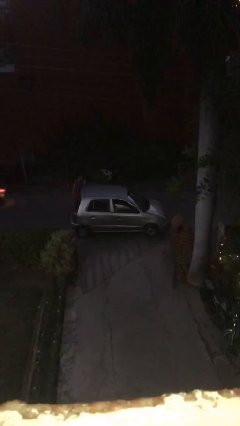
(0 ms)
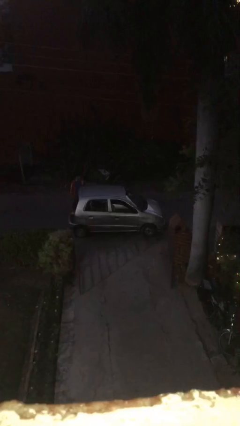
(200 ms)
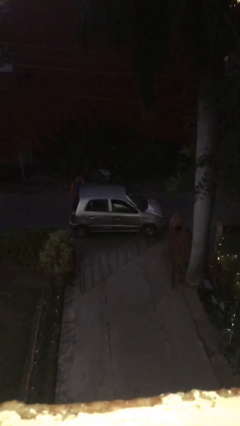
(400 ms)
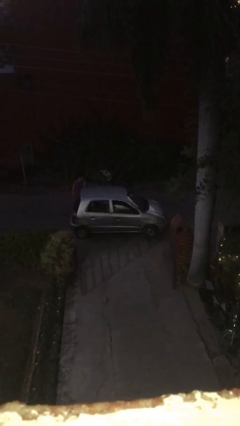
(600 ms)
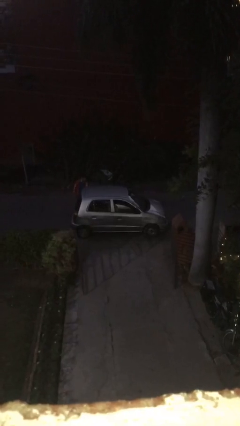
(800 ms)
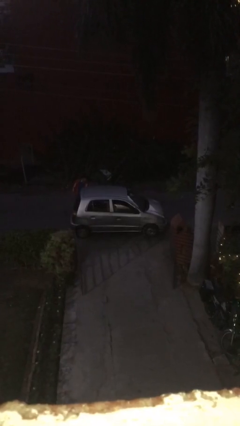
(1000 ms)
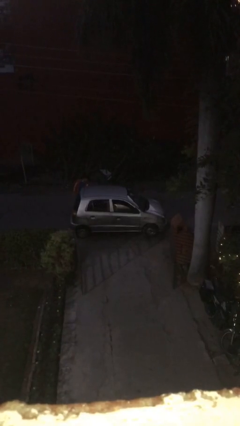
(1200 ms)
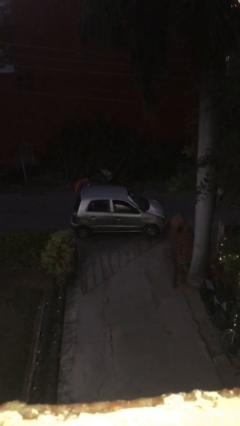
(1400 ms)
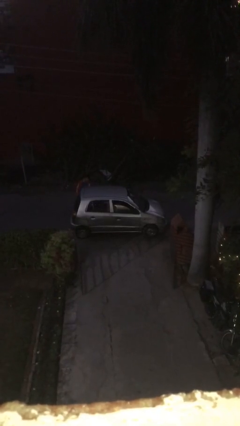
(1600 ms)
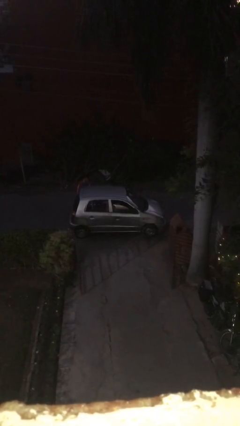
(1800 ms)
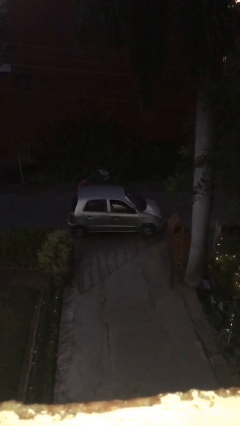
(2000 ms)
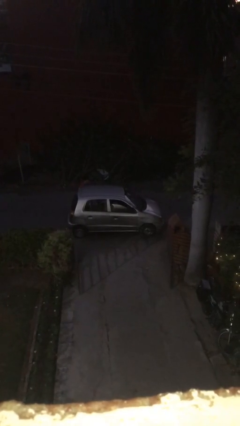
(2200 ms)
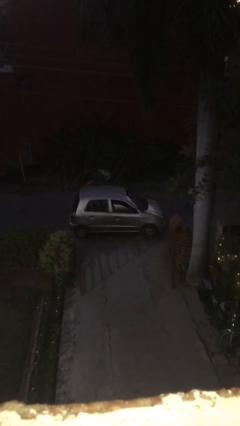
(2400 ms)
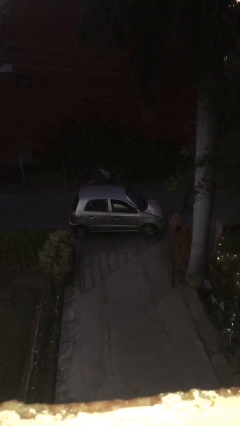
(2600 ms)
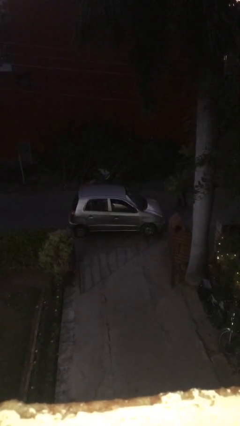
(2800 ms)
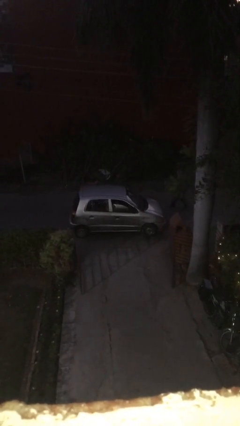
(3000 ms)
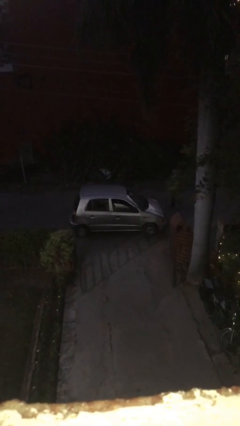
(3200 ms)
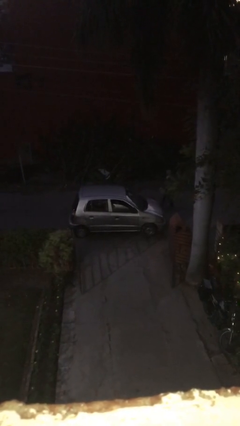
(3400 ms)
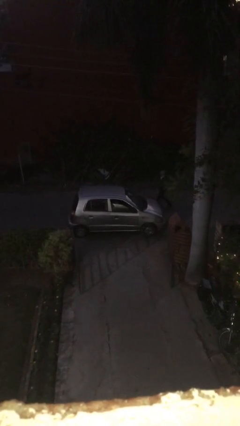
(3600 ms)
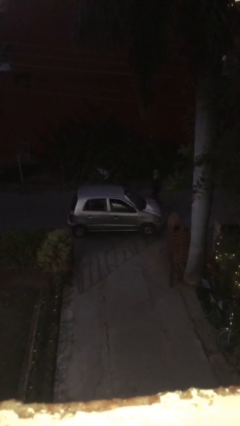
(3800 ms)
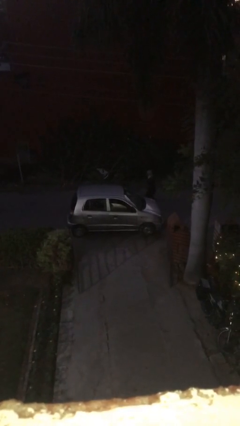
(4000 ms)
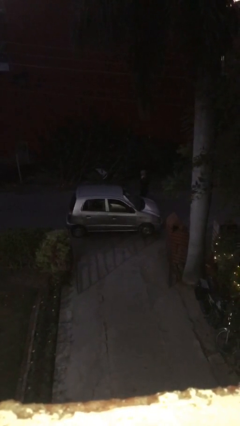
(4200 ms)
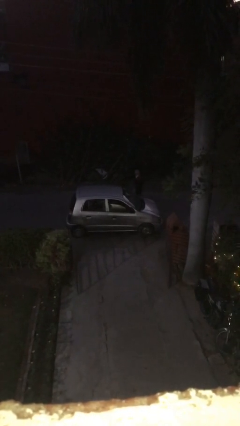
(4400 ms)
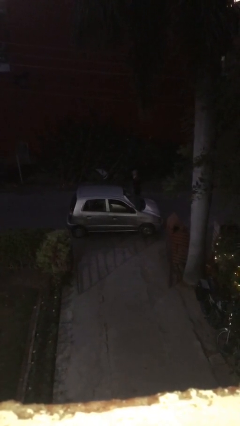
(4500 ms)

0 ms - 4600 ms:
car picks up person

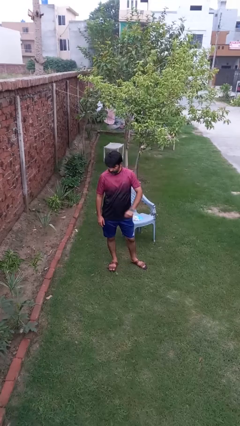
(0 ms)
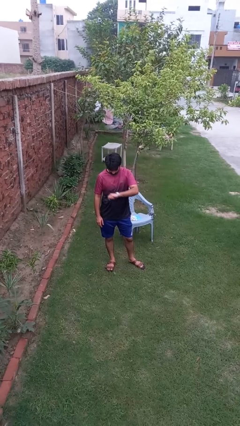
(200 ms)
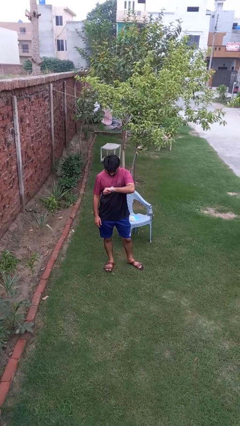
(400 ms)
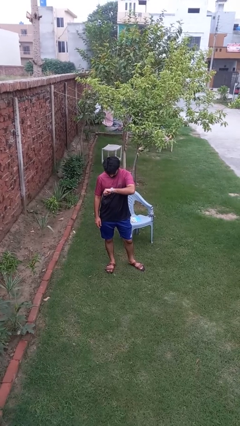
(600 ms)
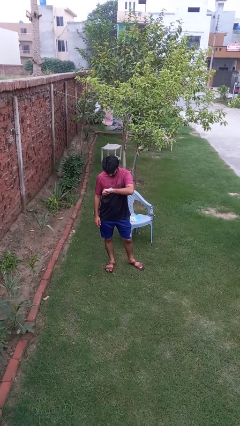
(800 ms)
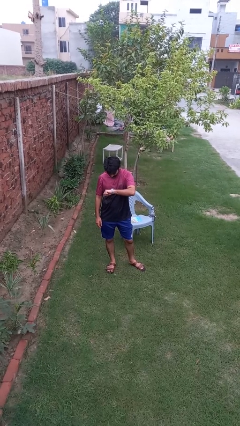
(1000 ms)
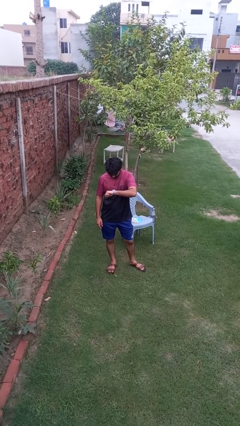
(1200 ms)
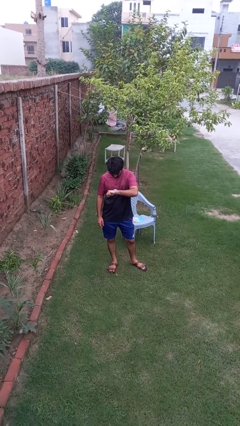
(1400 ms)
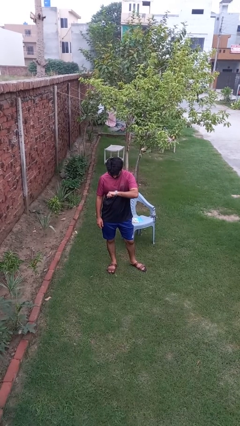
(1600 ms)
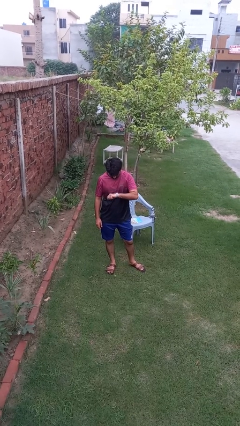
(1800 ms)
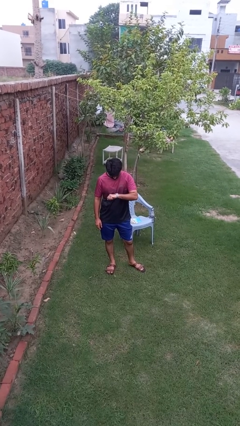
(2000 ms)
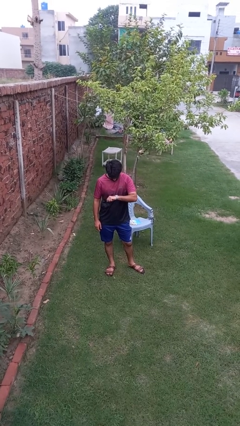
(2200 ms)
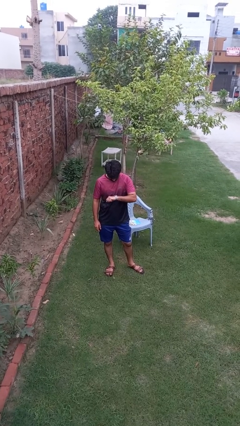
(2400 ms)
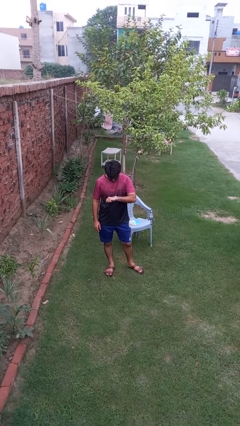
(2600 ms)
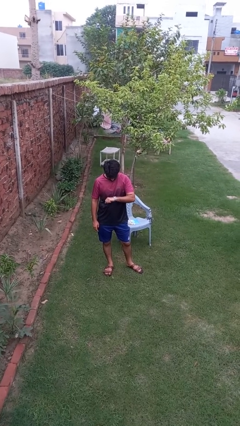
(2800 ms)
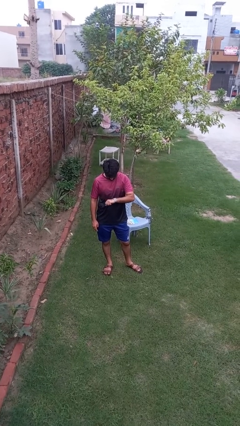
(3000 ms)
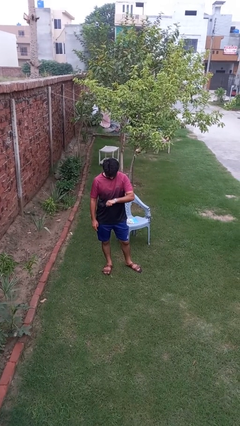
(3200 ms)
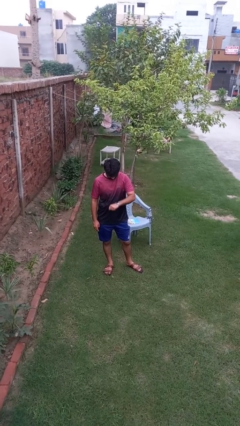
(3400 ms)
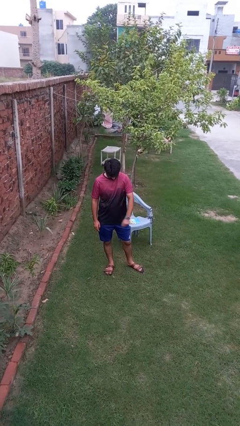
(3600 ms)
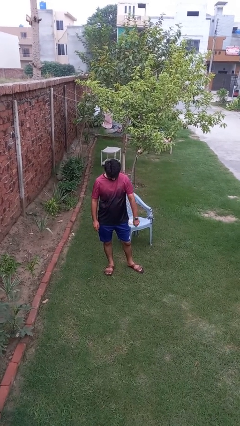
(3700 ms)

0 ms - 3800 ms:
person looks at wristwatch

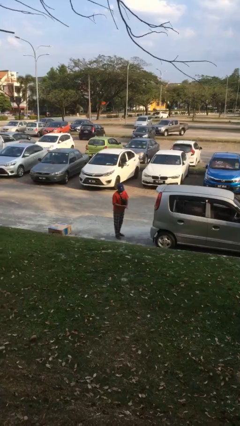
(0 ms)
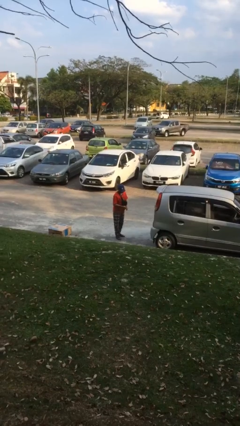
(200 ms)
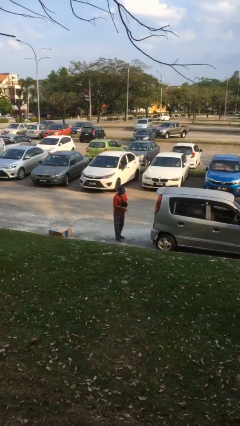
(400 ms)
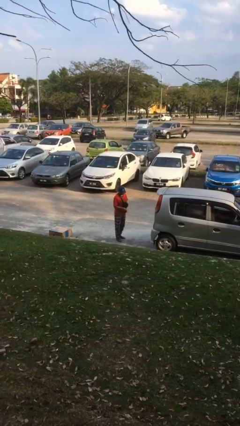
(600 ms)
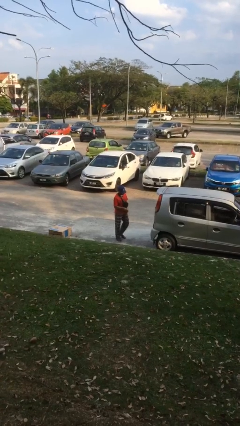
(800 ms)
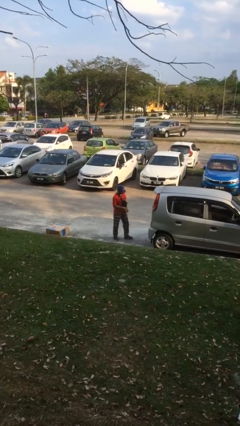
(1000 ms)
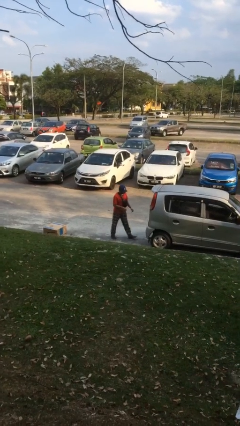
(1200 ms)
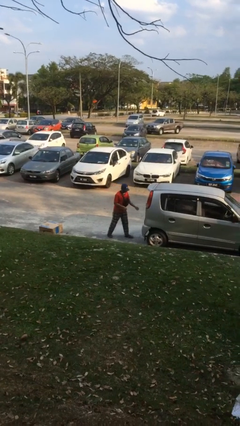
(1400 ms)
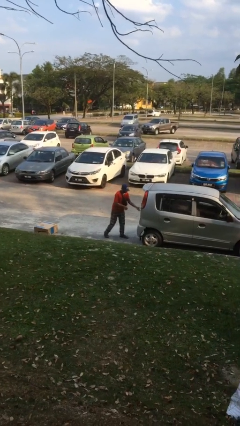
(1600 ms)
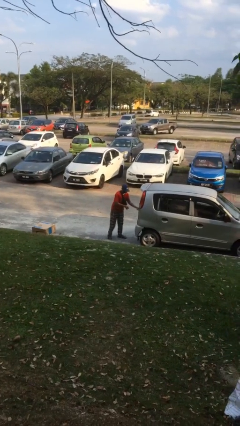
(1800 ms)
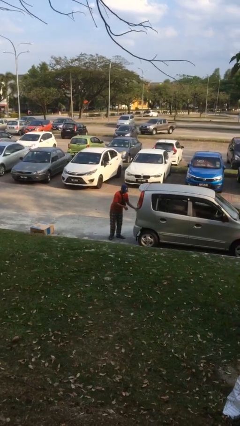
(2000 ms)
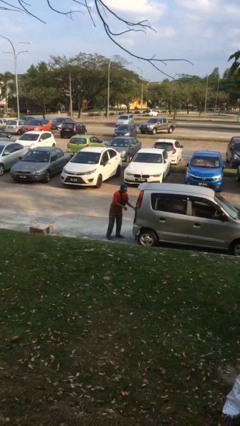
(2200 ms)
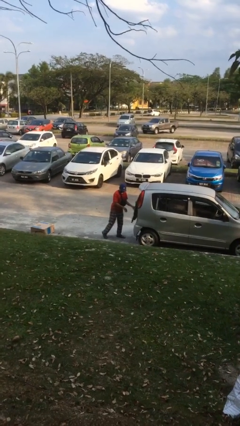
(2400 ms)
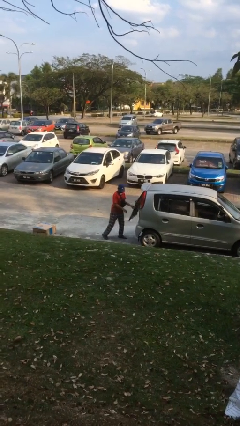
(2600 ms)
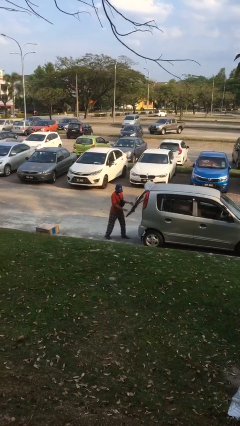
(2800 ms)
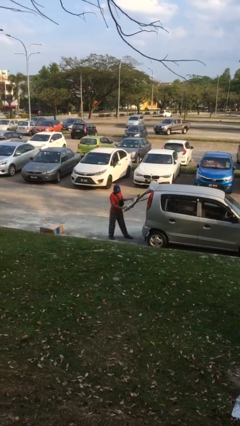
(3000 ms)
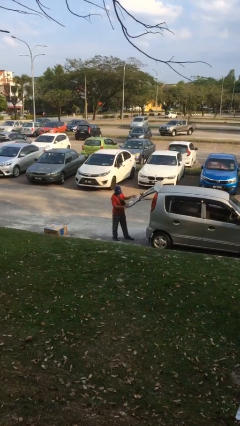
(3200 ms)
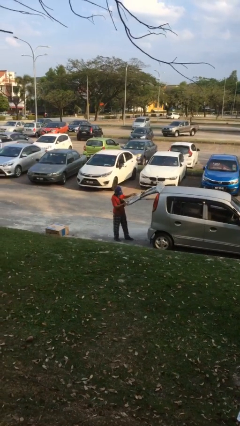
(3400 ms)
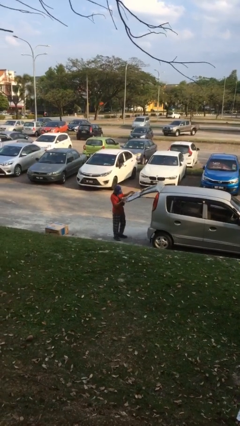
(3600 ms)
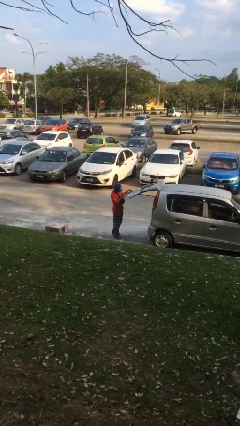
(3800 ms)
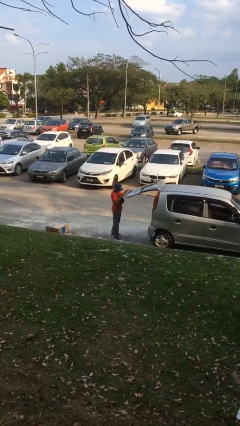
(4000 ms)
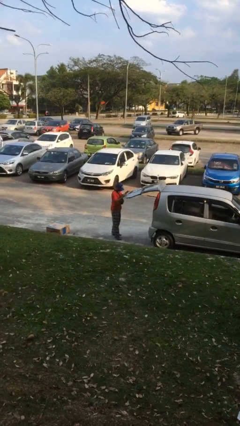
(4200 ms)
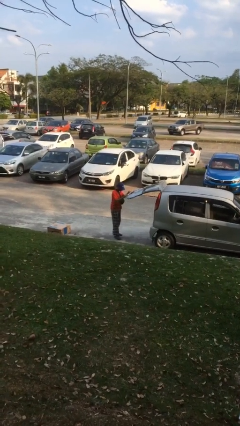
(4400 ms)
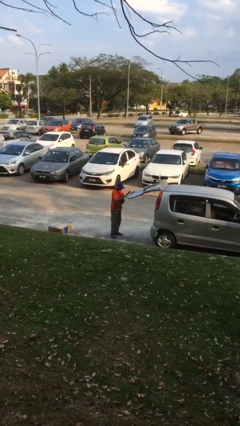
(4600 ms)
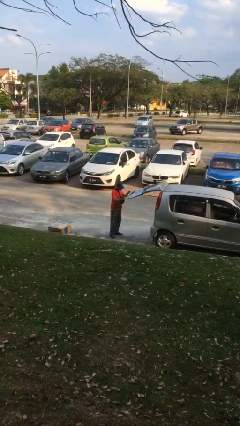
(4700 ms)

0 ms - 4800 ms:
person opens car trunk

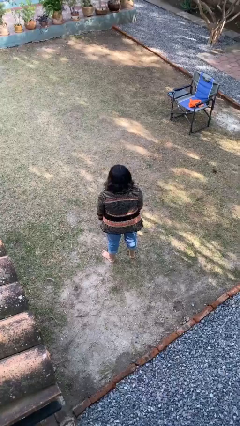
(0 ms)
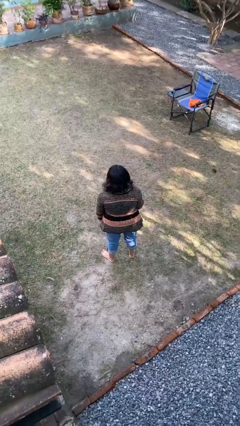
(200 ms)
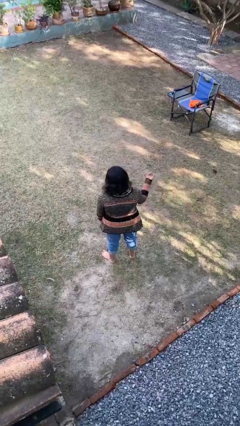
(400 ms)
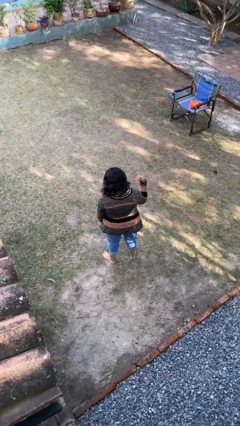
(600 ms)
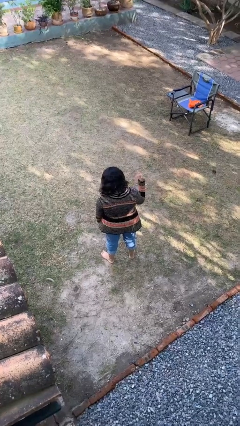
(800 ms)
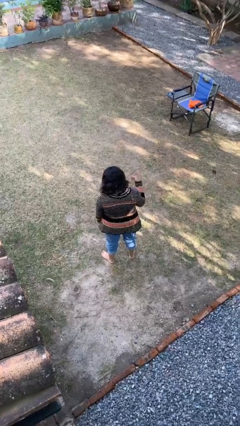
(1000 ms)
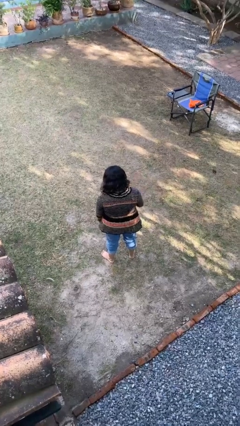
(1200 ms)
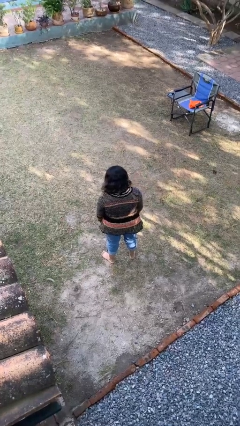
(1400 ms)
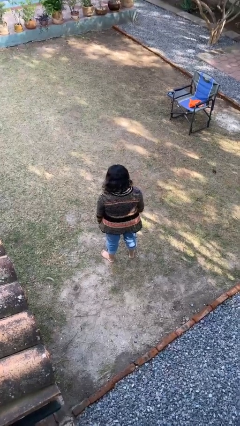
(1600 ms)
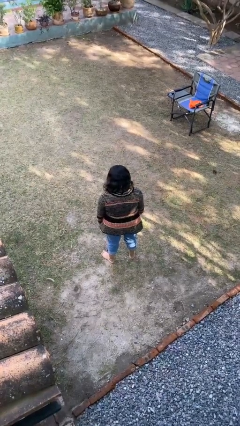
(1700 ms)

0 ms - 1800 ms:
person gestures hang loose

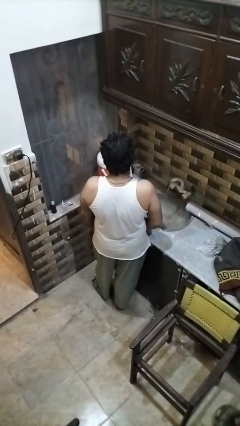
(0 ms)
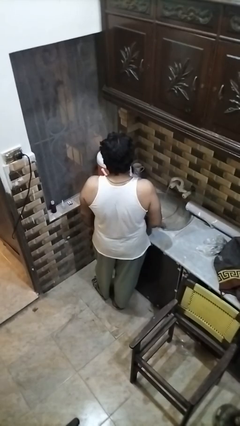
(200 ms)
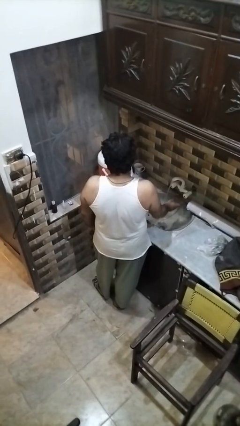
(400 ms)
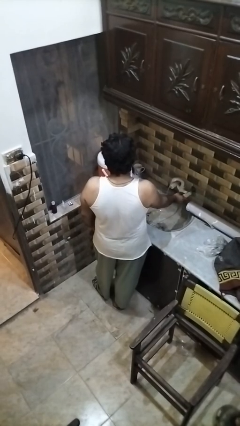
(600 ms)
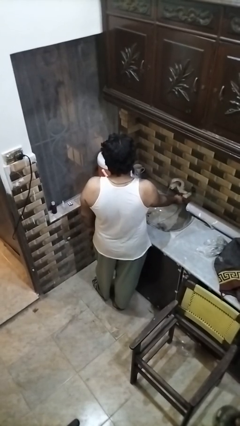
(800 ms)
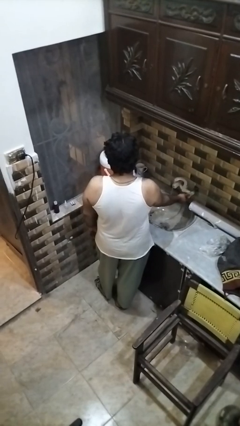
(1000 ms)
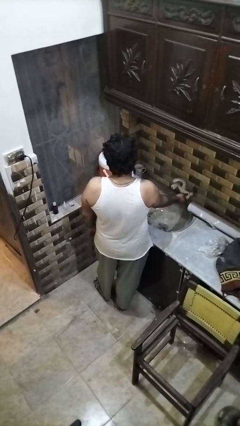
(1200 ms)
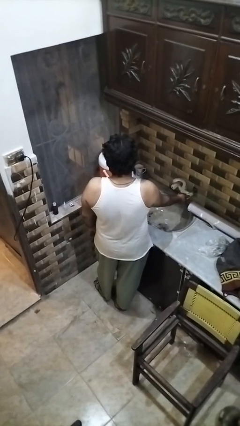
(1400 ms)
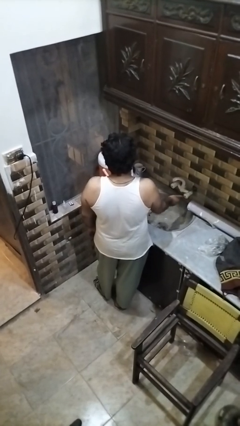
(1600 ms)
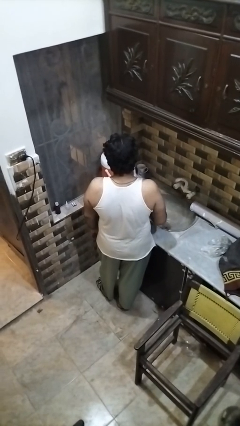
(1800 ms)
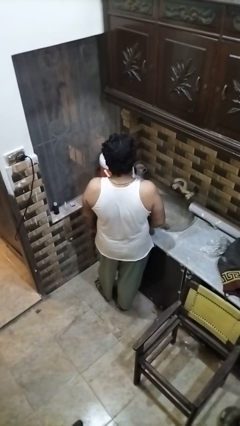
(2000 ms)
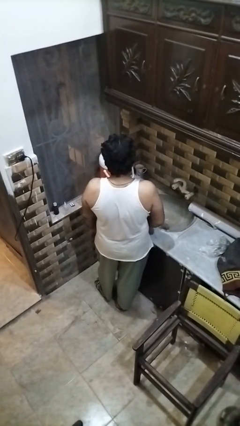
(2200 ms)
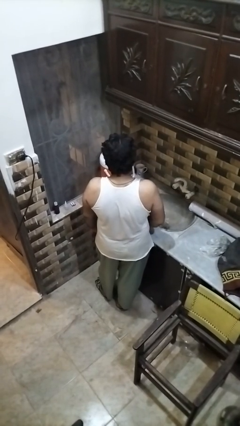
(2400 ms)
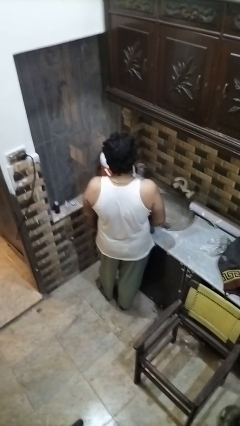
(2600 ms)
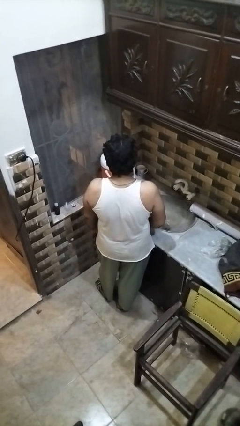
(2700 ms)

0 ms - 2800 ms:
person turns off faucet
